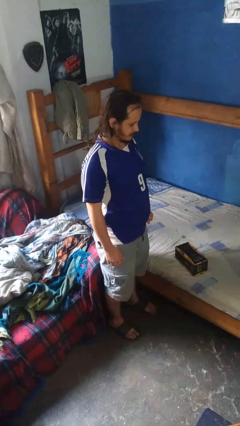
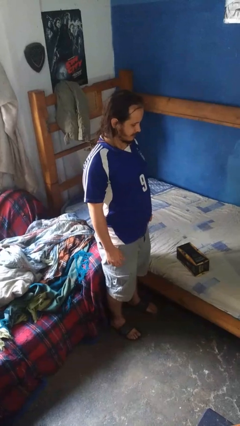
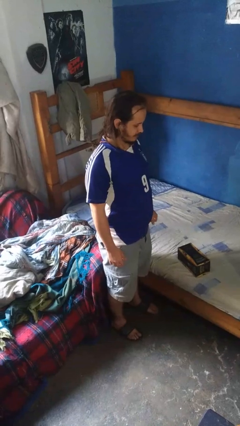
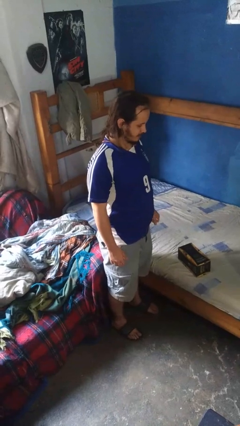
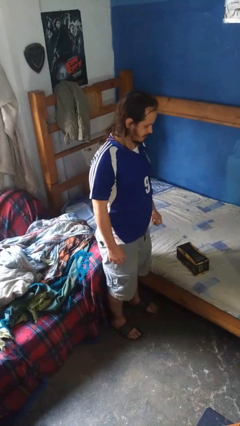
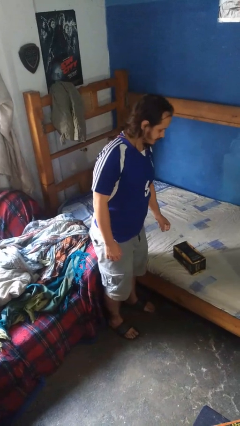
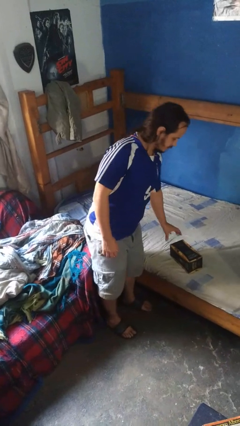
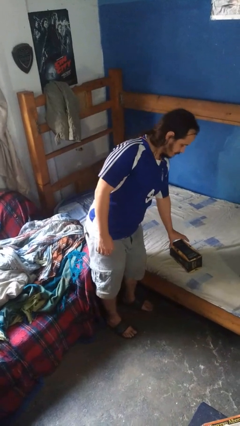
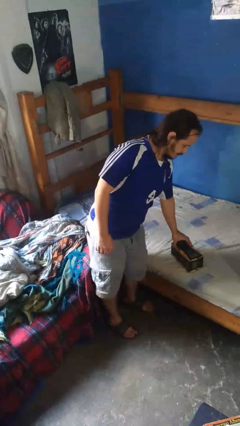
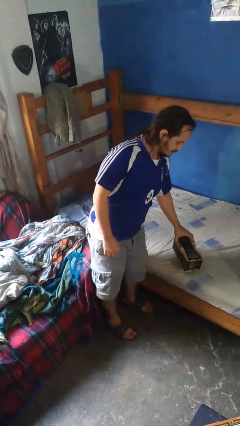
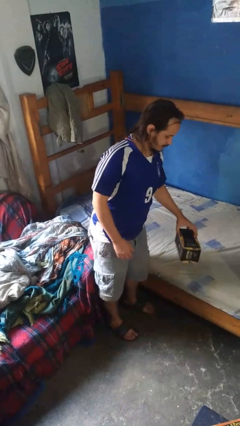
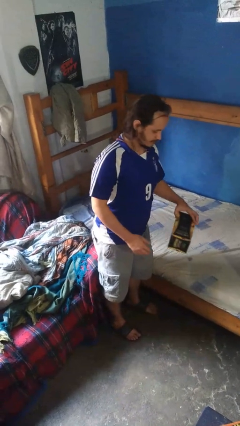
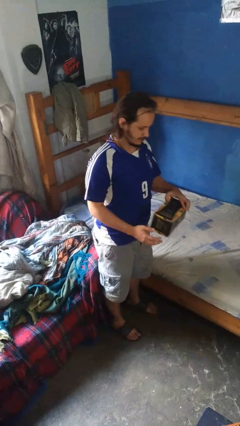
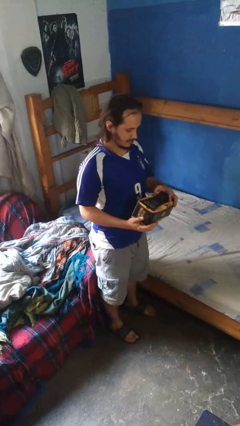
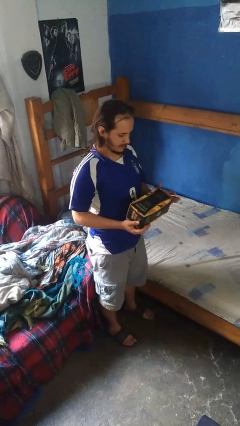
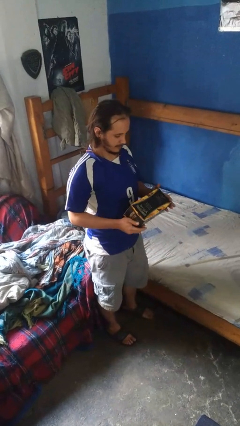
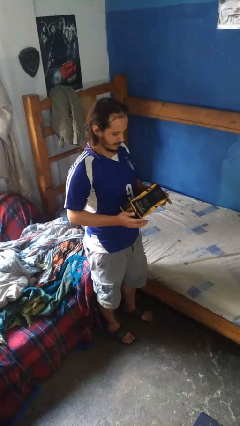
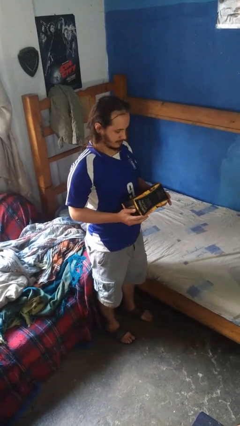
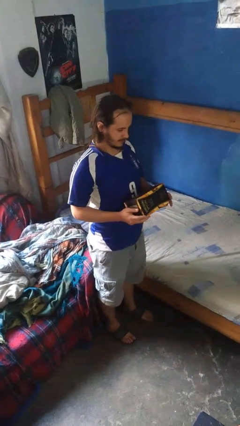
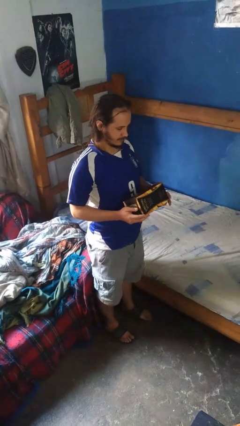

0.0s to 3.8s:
person picks up object from bed

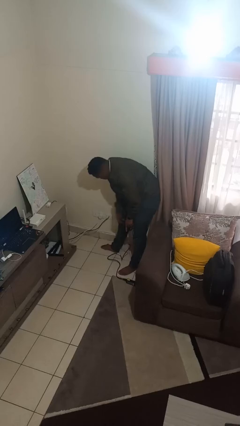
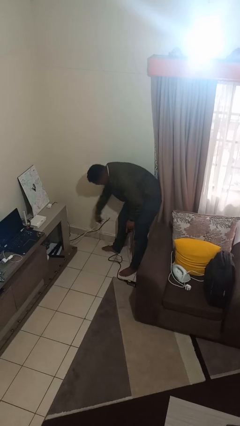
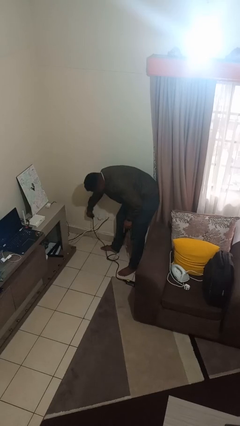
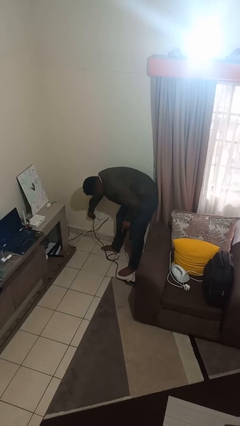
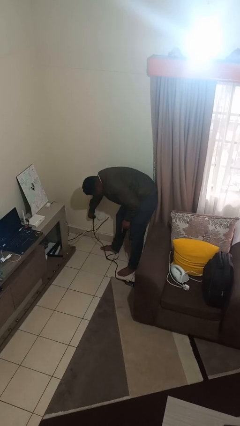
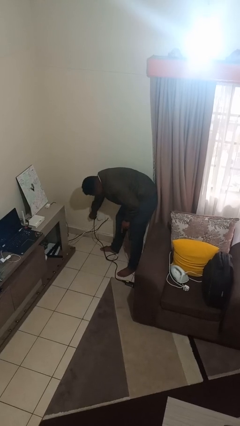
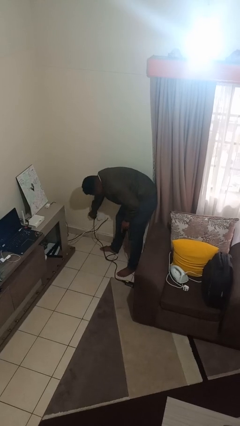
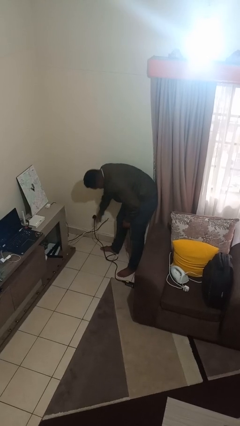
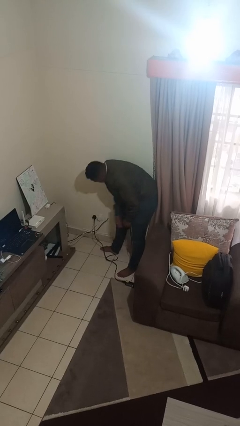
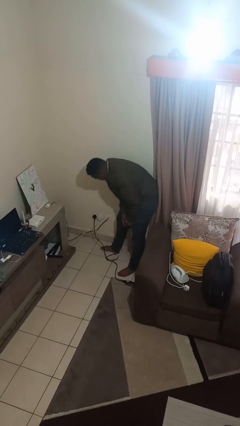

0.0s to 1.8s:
person plugs into electrical socket

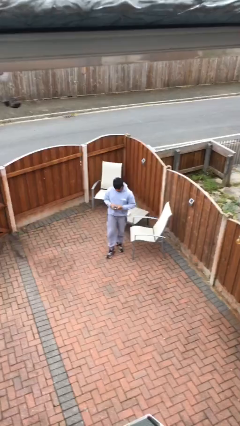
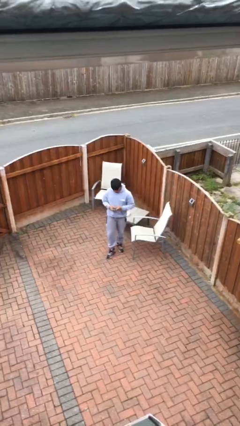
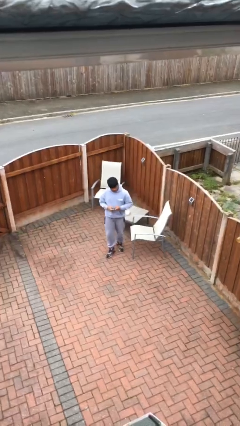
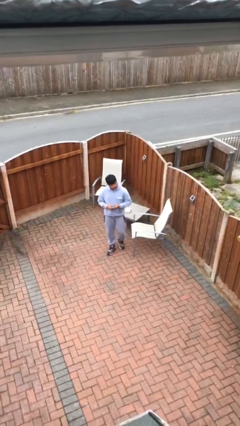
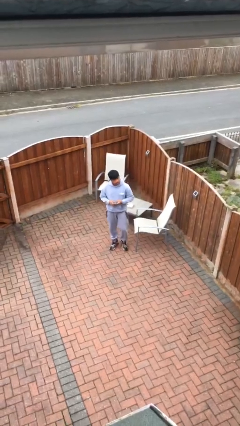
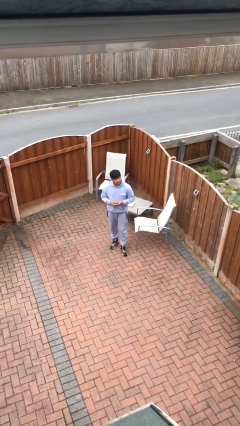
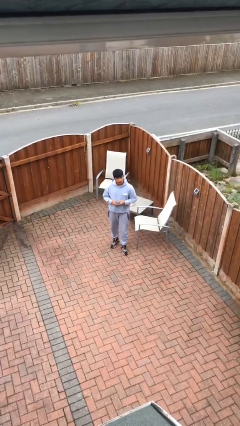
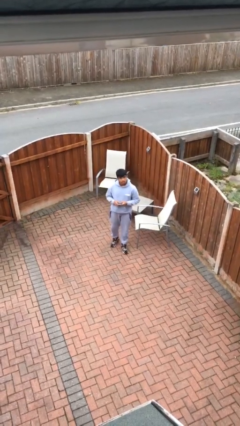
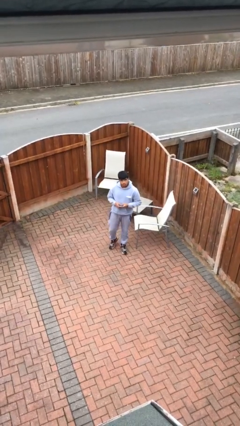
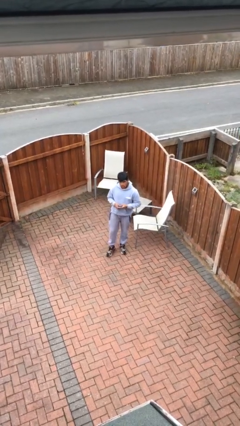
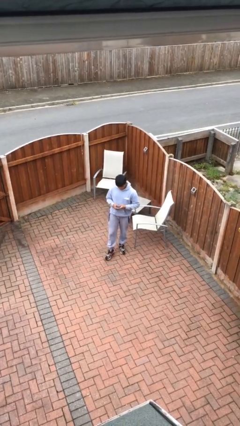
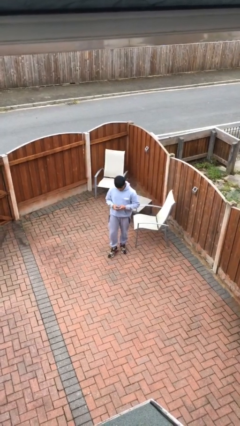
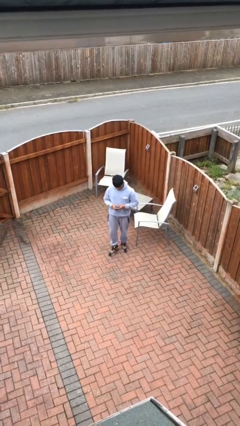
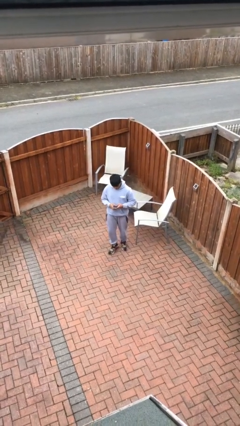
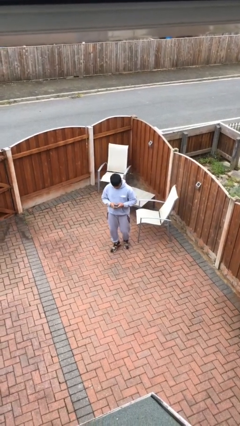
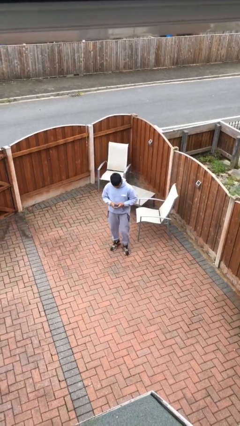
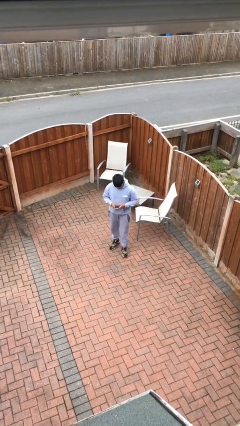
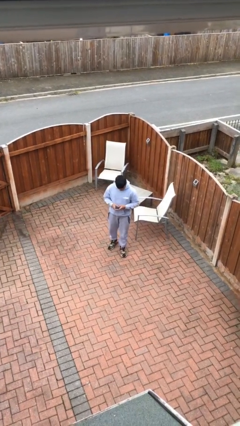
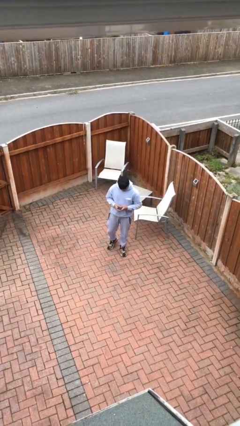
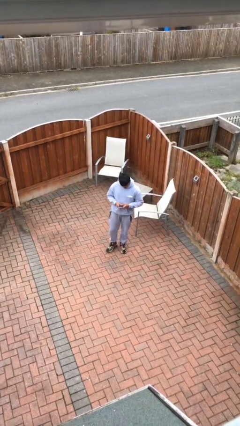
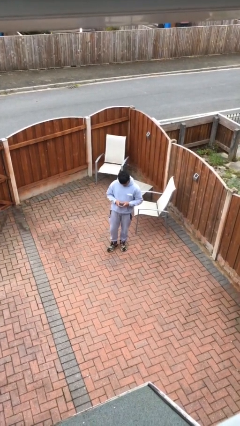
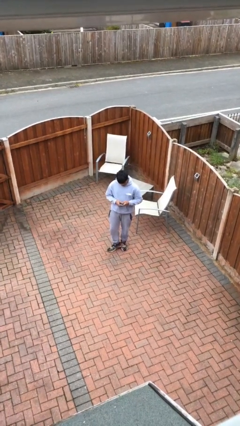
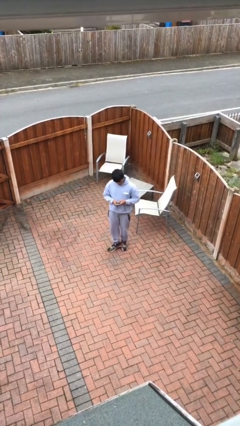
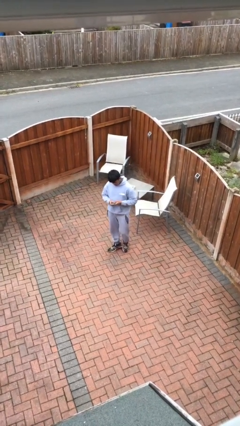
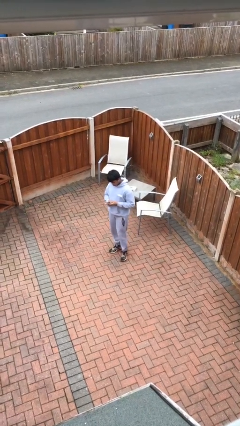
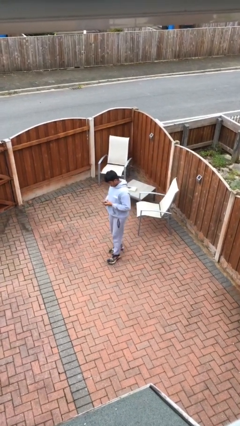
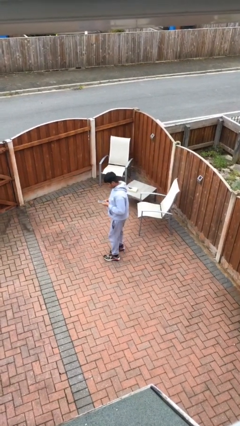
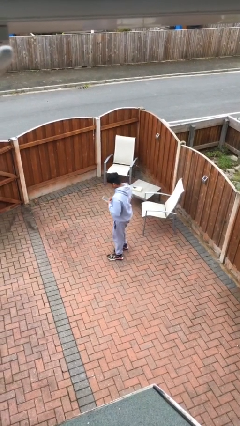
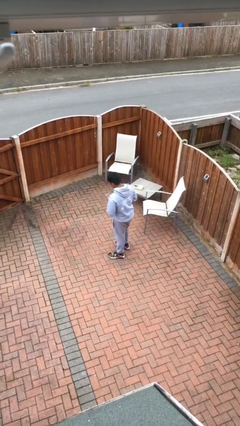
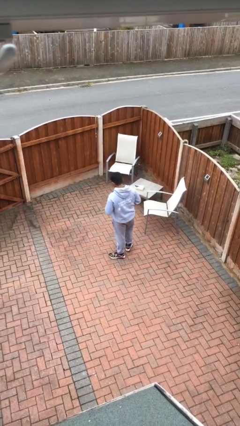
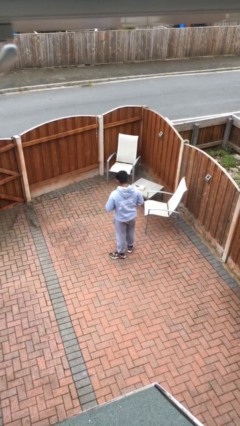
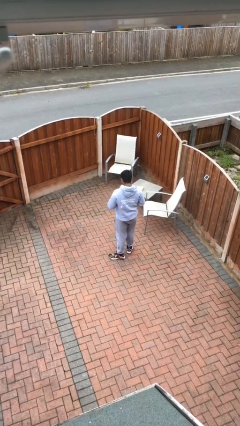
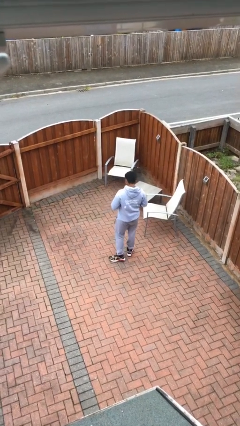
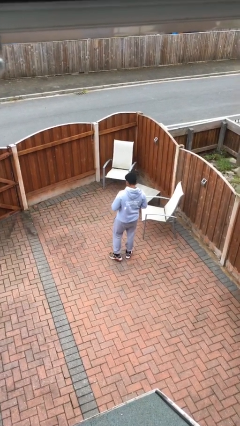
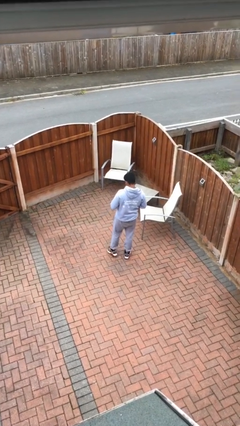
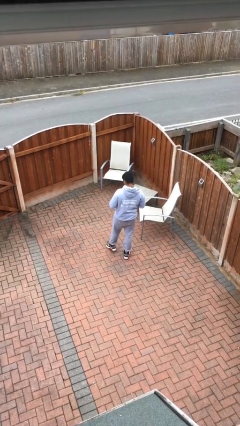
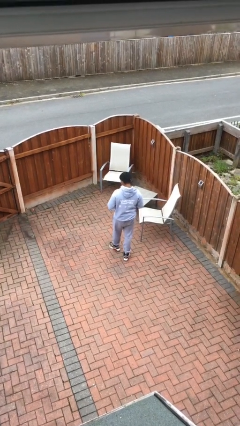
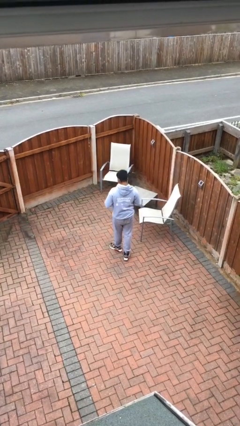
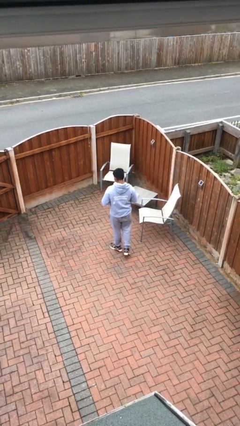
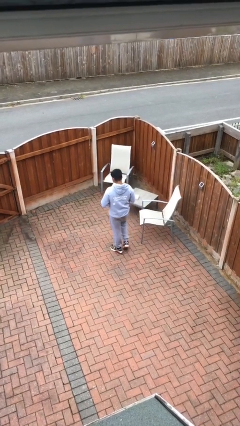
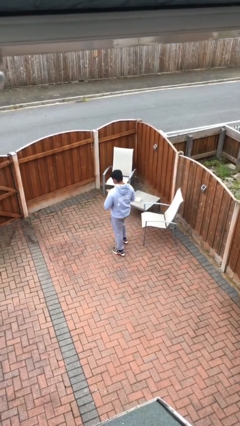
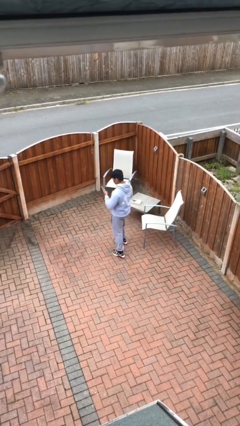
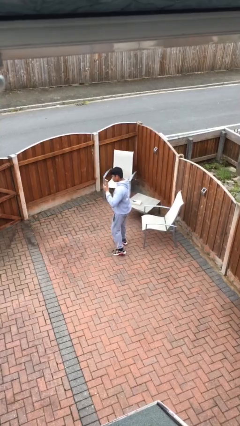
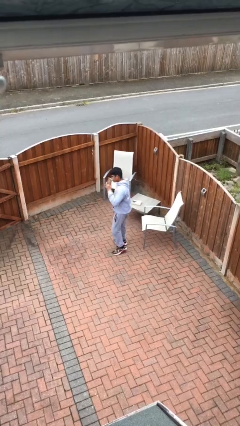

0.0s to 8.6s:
person texts on phone

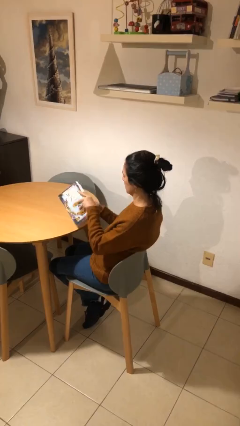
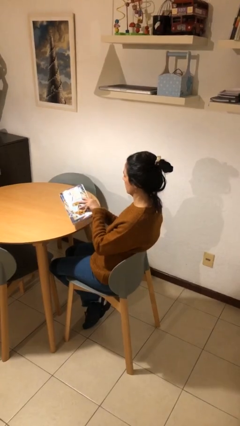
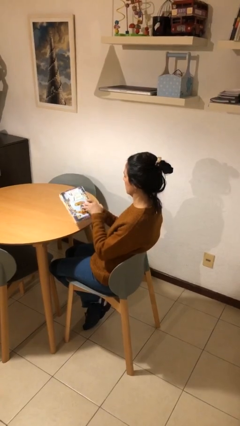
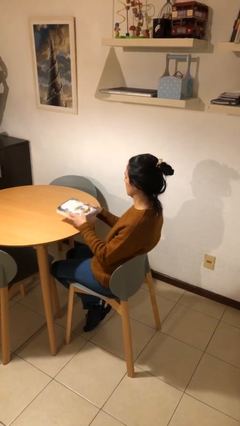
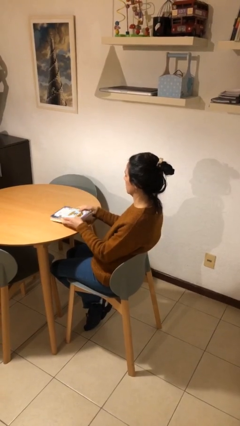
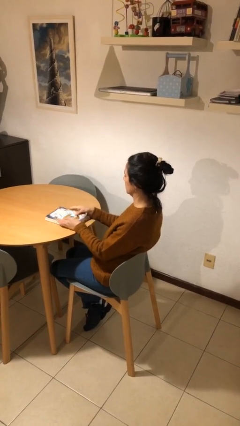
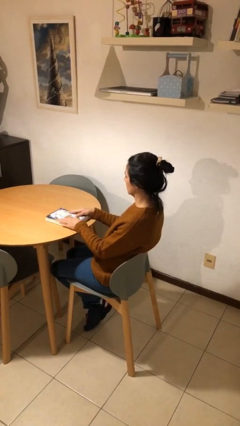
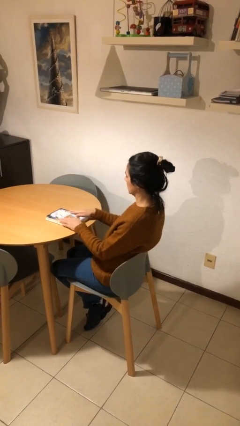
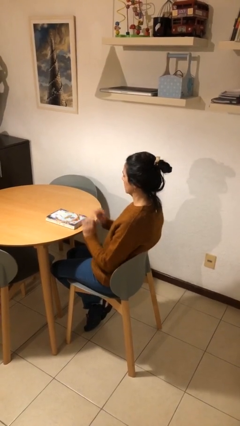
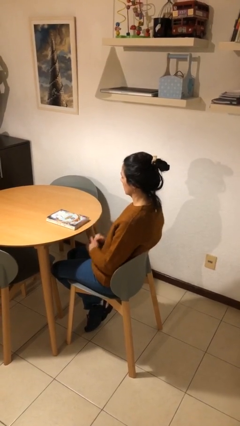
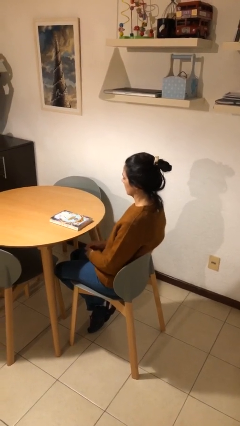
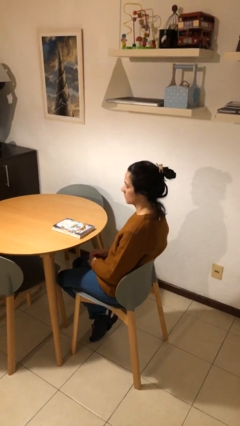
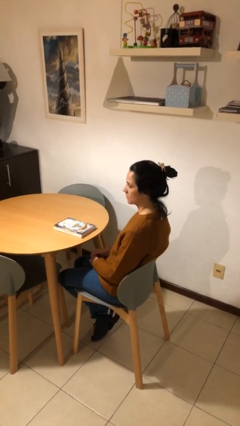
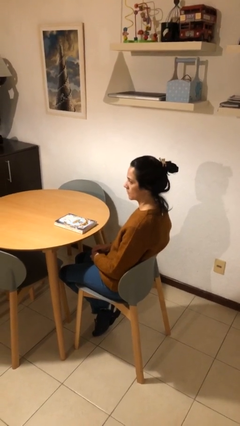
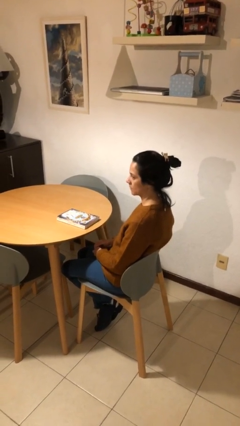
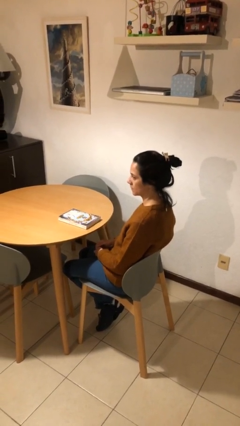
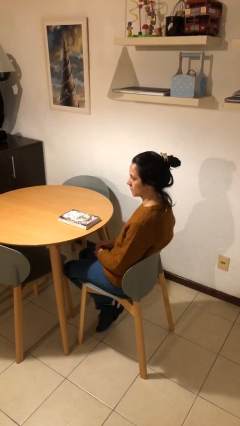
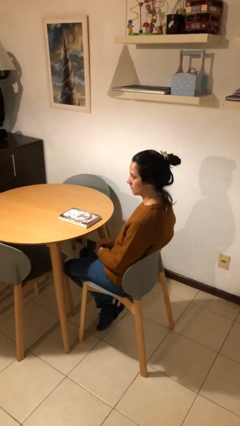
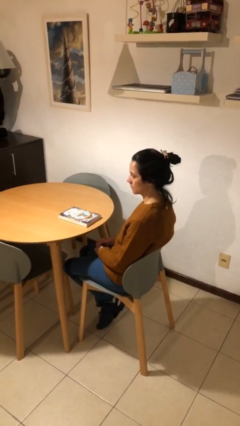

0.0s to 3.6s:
person puts down object on table

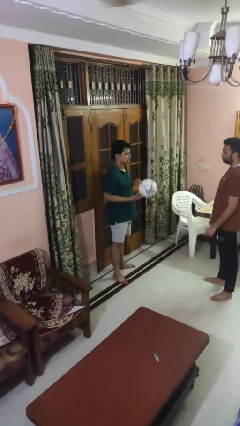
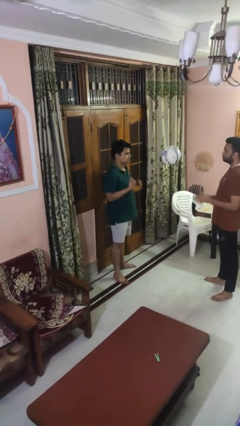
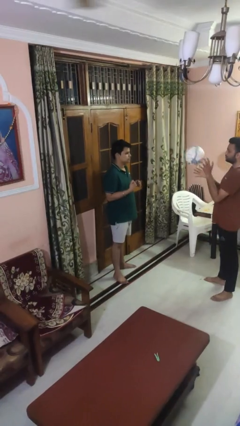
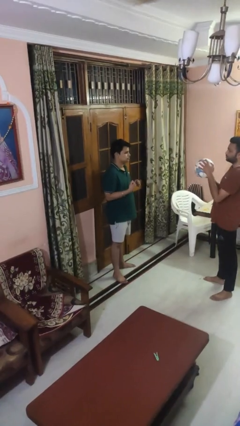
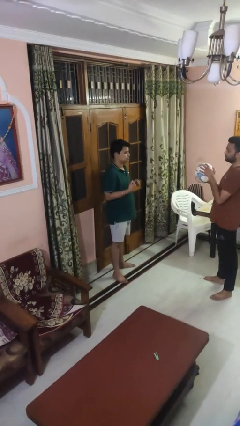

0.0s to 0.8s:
person throws object to person
